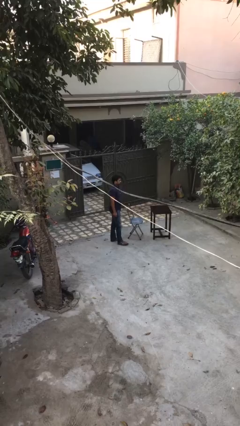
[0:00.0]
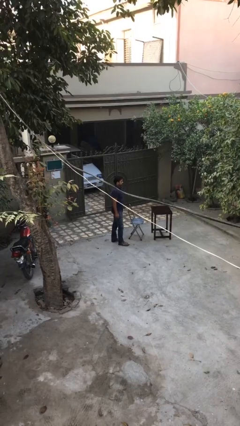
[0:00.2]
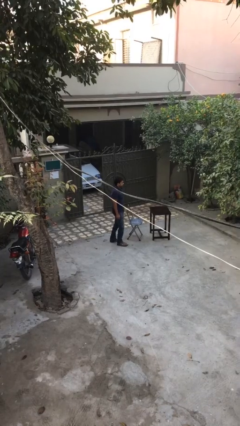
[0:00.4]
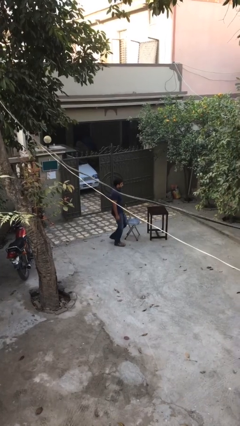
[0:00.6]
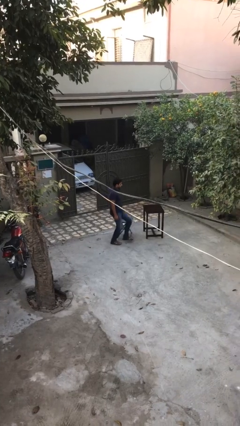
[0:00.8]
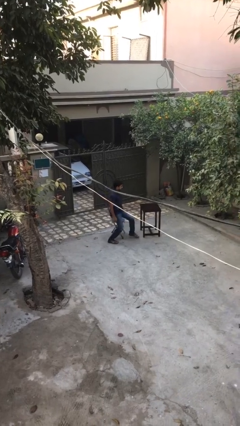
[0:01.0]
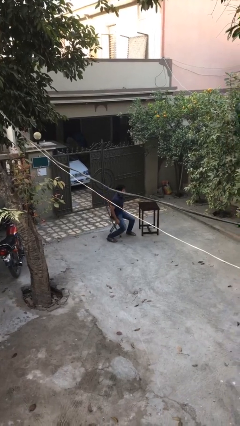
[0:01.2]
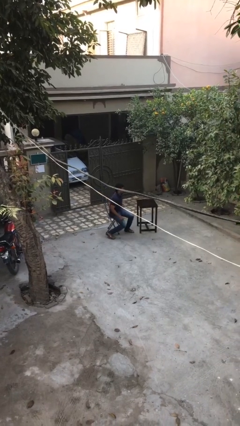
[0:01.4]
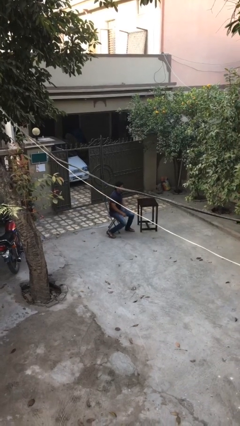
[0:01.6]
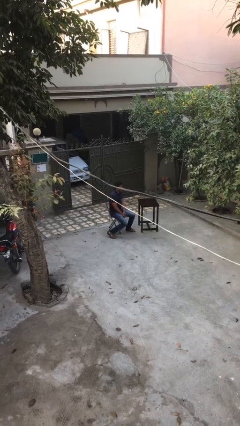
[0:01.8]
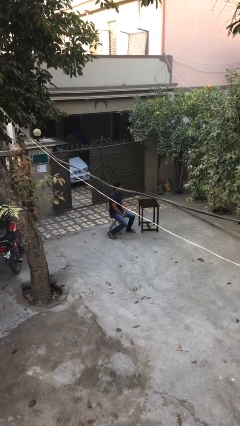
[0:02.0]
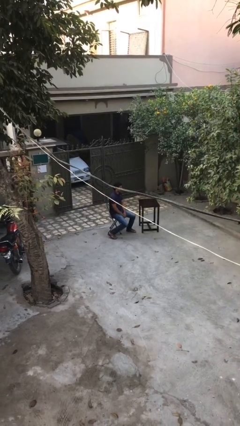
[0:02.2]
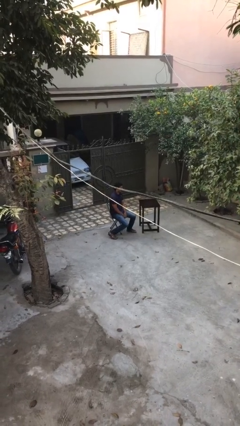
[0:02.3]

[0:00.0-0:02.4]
person sits down

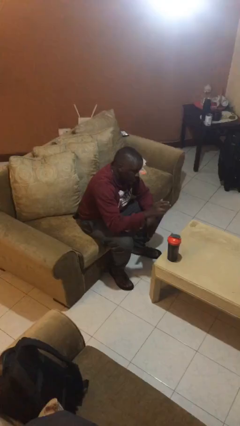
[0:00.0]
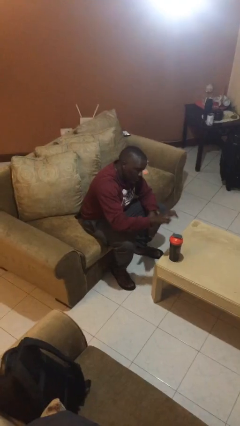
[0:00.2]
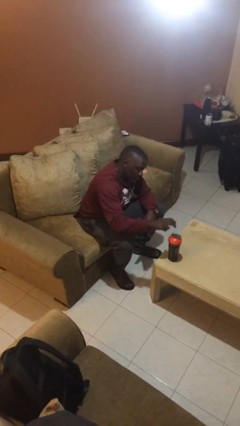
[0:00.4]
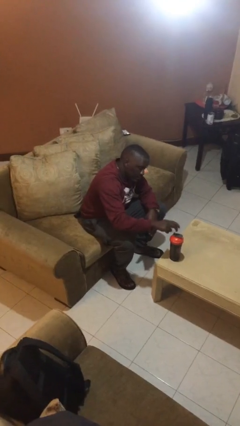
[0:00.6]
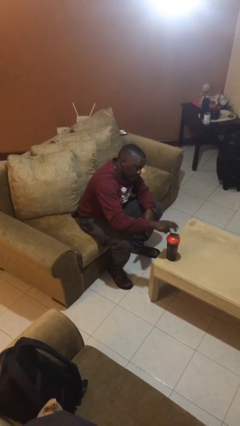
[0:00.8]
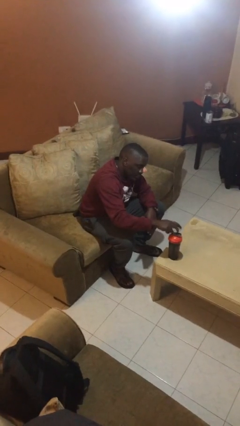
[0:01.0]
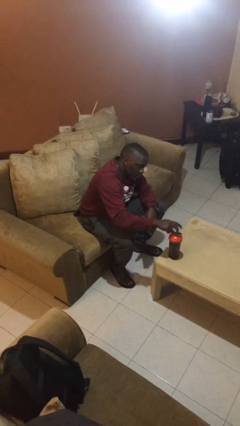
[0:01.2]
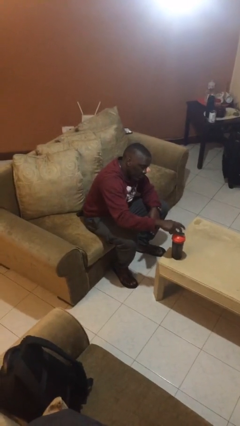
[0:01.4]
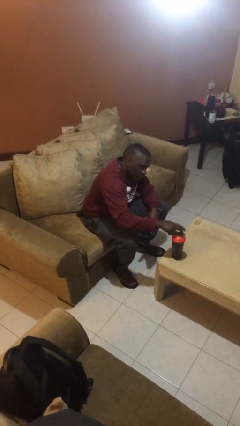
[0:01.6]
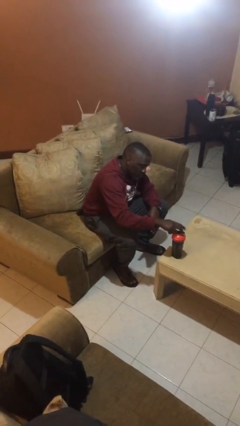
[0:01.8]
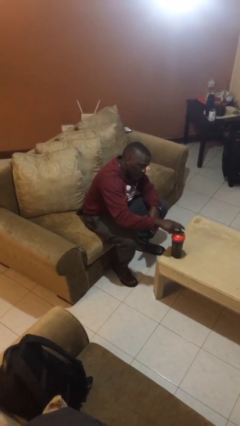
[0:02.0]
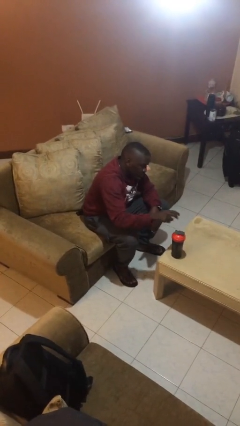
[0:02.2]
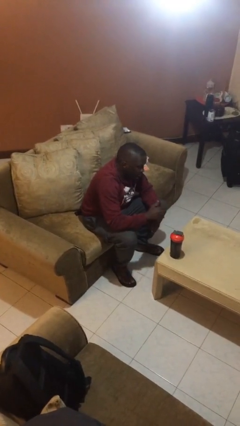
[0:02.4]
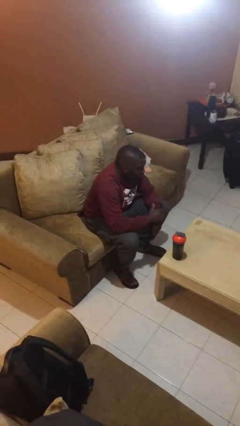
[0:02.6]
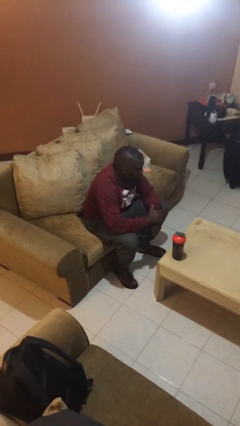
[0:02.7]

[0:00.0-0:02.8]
person taps object with finger

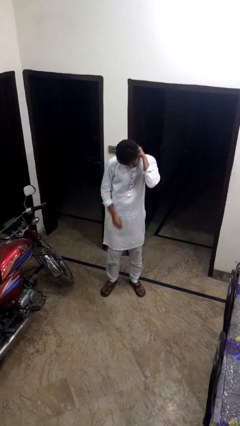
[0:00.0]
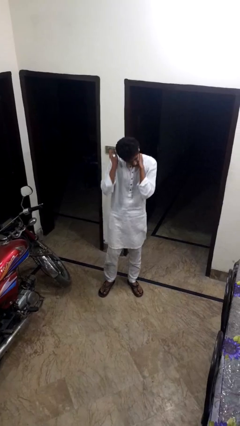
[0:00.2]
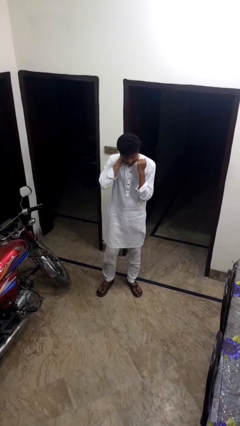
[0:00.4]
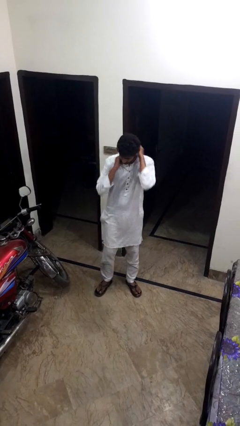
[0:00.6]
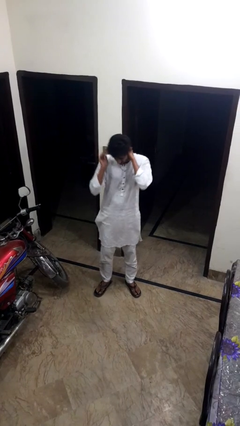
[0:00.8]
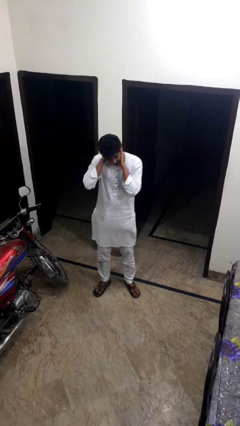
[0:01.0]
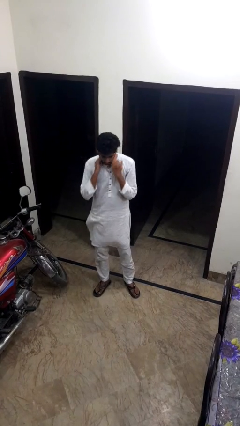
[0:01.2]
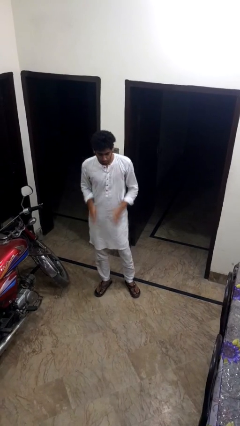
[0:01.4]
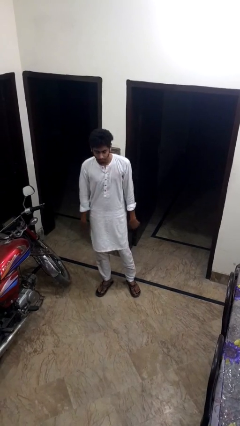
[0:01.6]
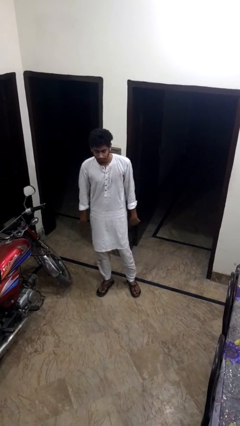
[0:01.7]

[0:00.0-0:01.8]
person rubs neck

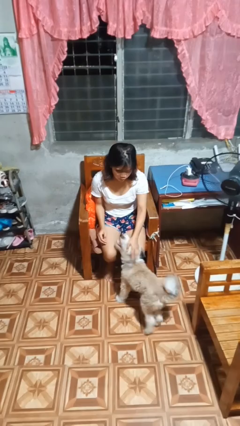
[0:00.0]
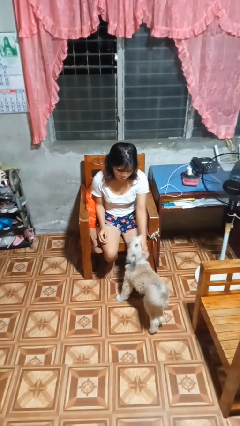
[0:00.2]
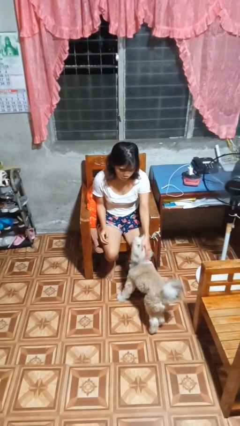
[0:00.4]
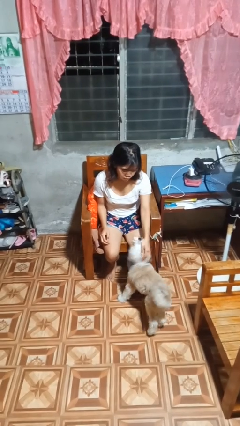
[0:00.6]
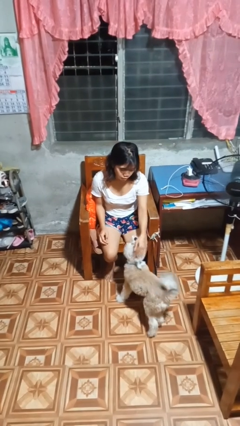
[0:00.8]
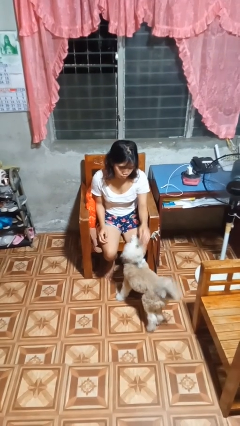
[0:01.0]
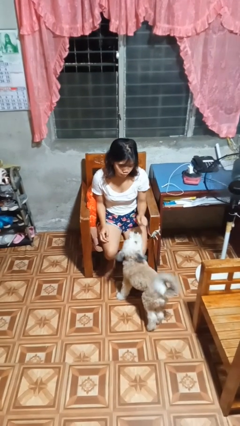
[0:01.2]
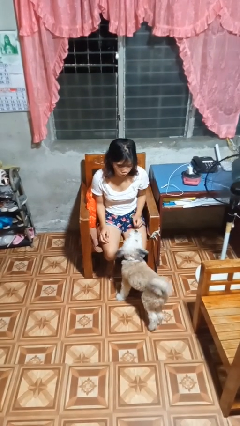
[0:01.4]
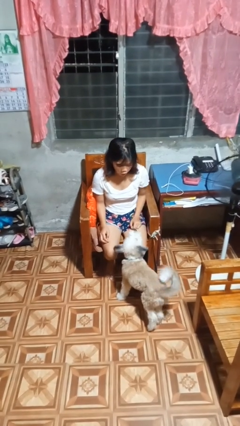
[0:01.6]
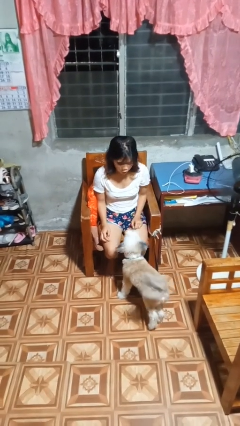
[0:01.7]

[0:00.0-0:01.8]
person pets dog

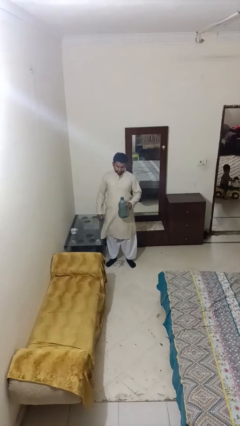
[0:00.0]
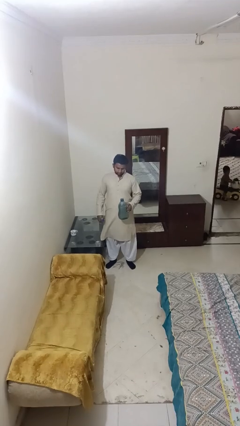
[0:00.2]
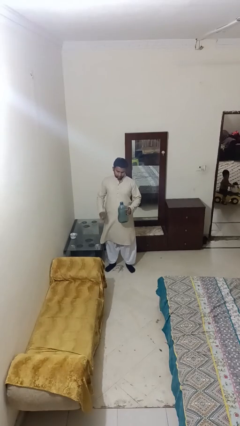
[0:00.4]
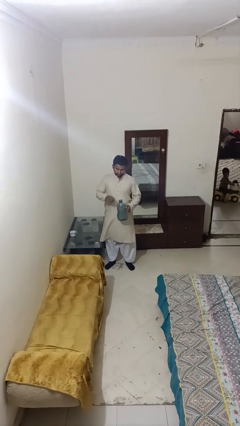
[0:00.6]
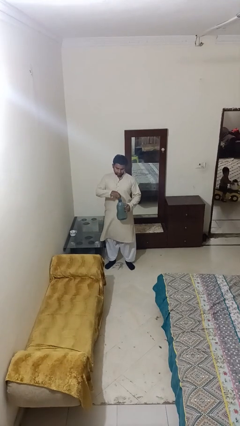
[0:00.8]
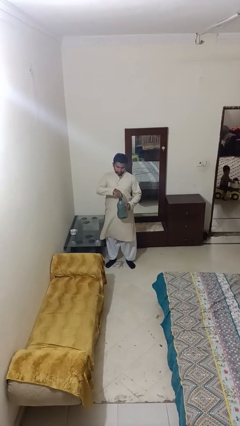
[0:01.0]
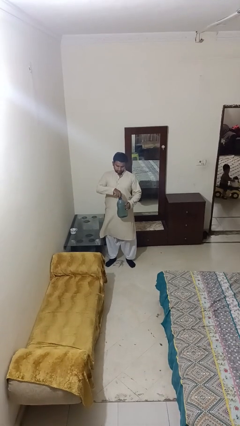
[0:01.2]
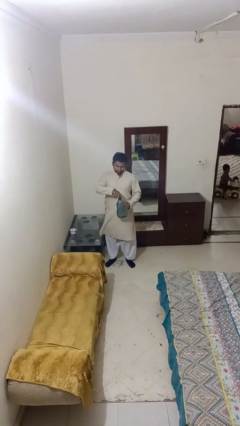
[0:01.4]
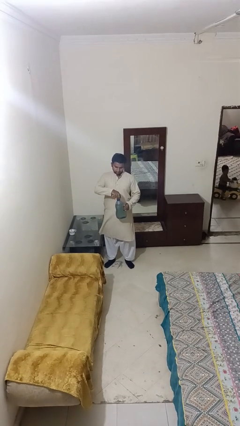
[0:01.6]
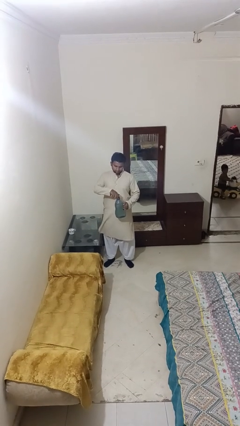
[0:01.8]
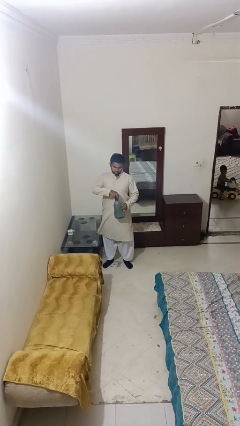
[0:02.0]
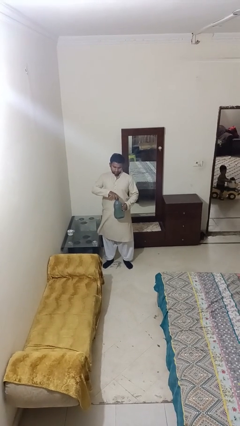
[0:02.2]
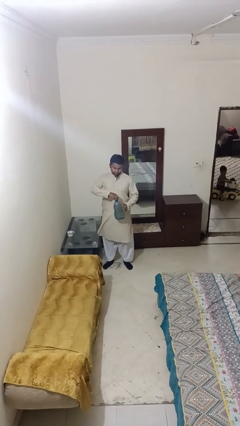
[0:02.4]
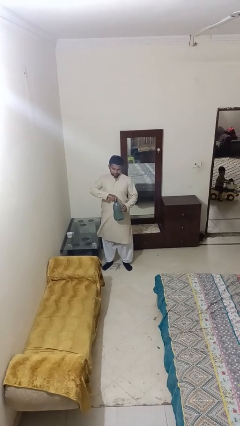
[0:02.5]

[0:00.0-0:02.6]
person screws lid to bottle

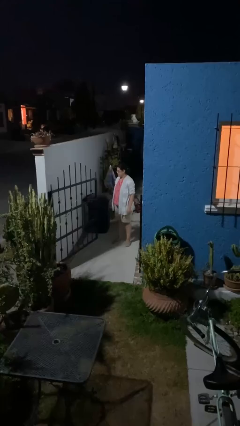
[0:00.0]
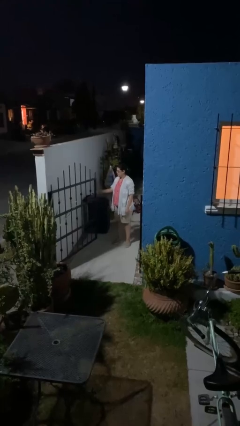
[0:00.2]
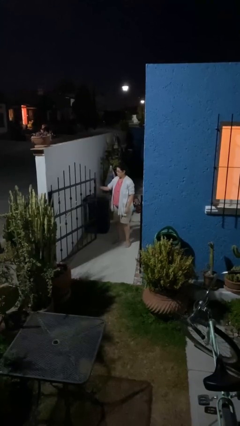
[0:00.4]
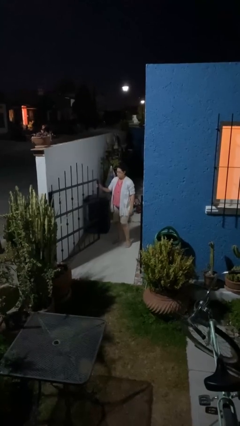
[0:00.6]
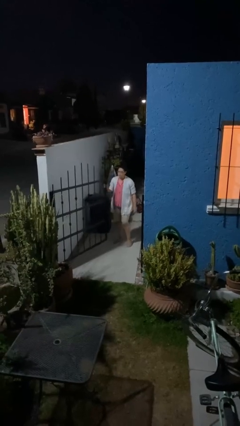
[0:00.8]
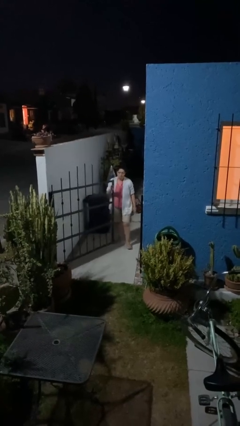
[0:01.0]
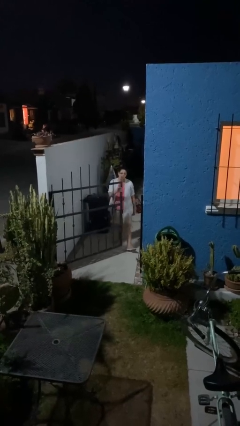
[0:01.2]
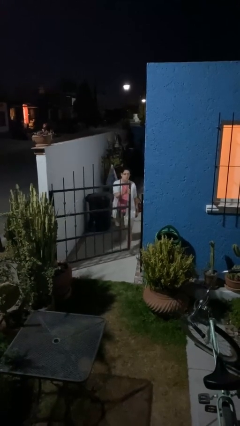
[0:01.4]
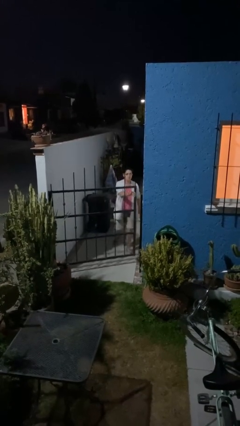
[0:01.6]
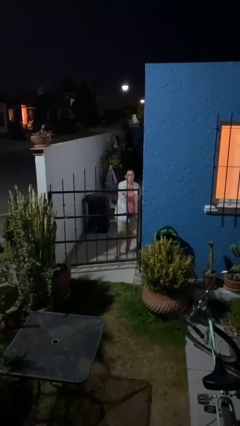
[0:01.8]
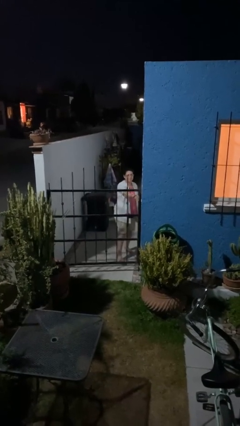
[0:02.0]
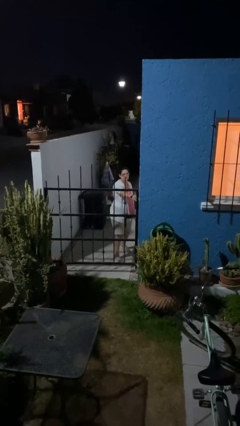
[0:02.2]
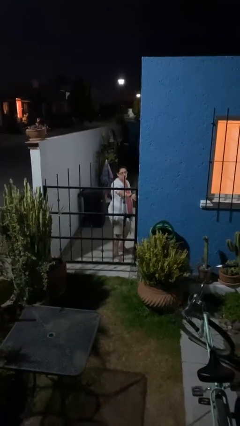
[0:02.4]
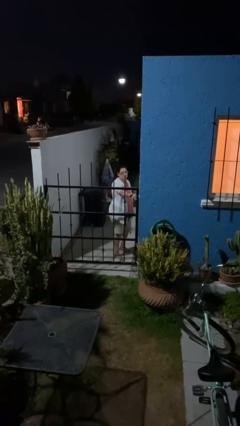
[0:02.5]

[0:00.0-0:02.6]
person closes facility door

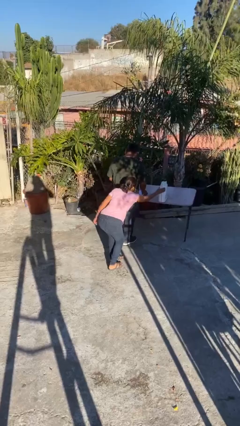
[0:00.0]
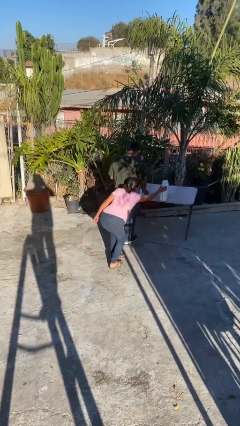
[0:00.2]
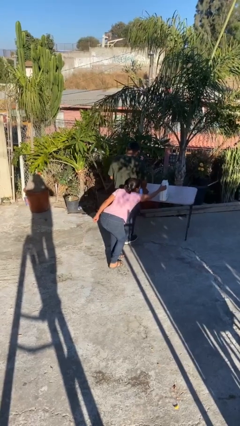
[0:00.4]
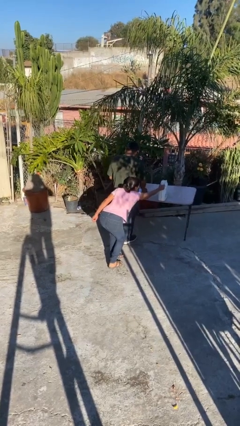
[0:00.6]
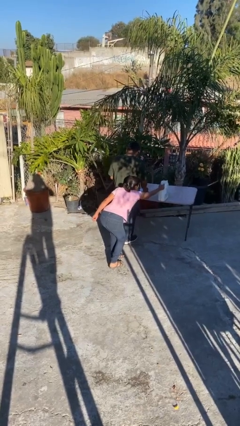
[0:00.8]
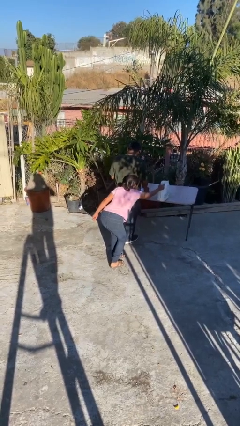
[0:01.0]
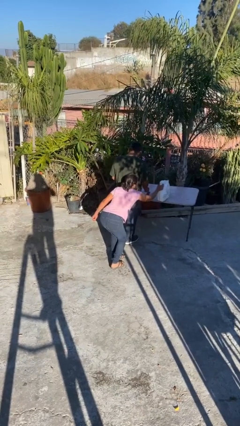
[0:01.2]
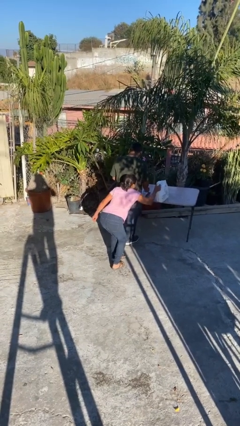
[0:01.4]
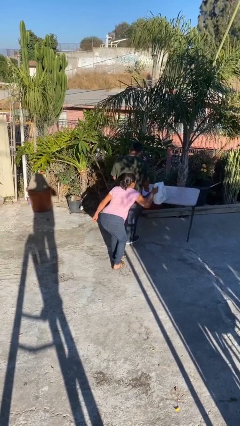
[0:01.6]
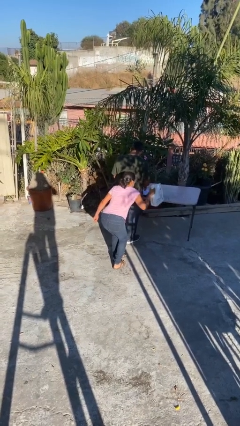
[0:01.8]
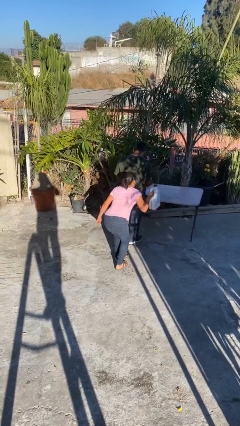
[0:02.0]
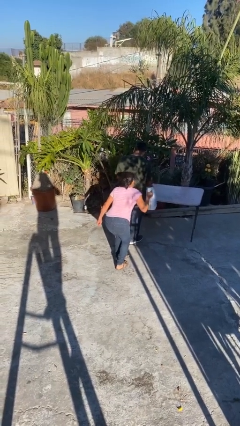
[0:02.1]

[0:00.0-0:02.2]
person steals object from person

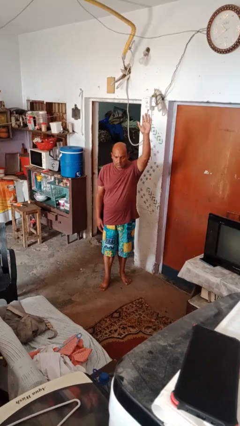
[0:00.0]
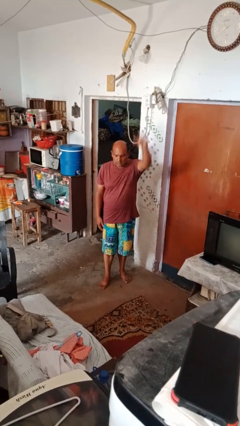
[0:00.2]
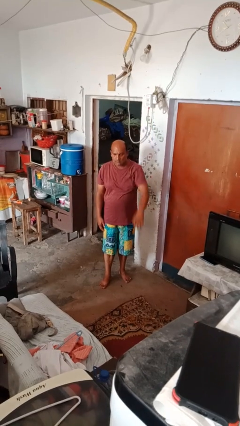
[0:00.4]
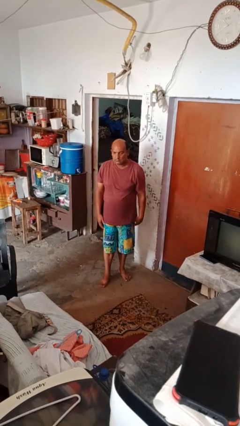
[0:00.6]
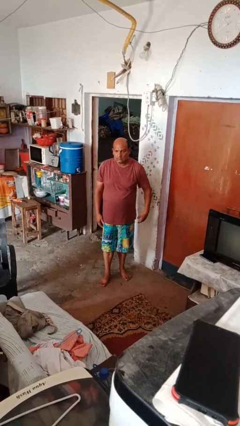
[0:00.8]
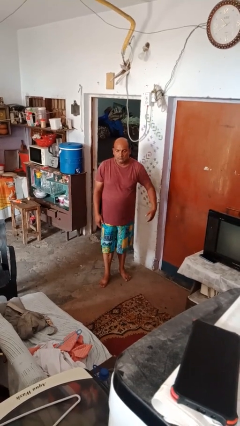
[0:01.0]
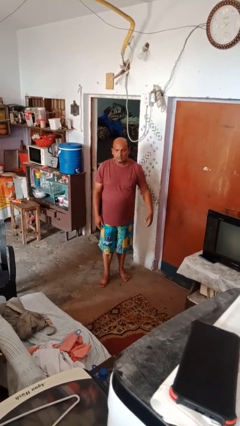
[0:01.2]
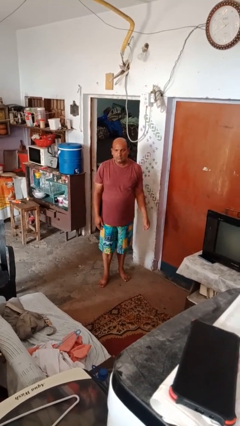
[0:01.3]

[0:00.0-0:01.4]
person gestures swipe down
